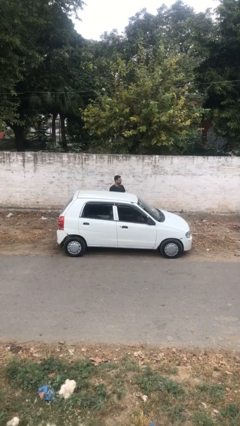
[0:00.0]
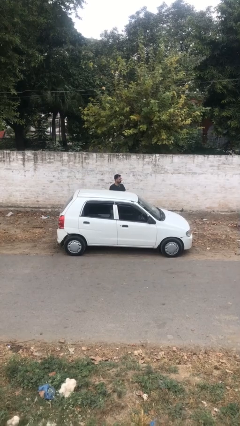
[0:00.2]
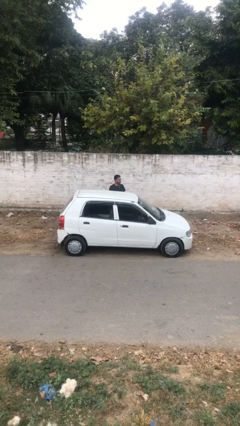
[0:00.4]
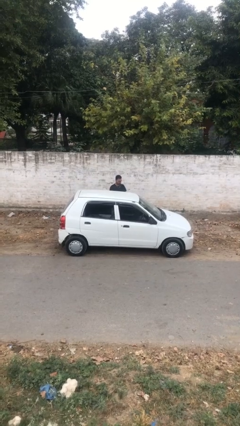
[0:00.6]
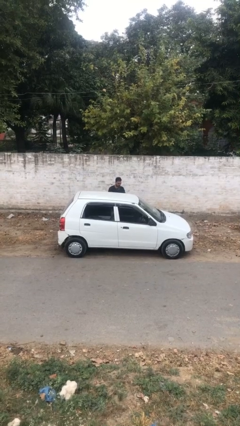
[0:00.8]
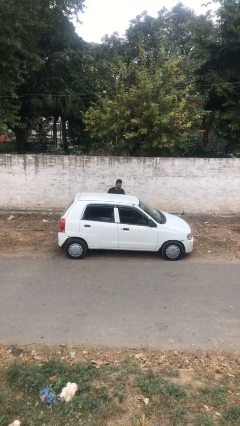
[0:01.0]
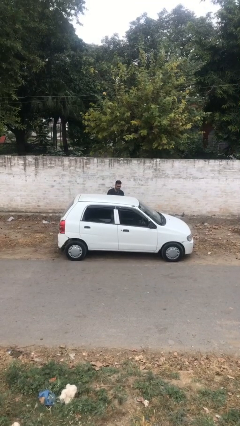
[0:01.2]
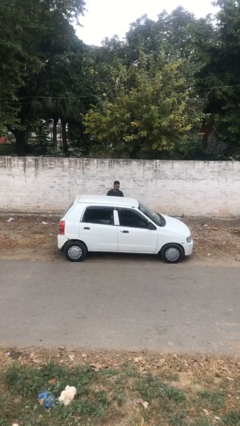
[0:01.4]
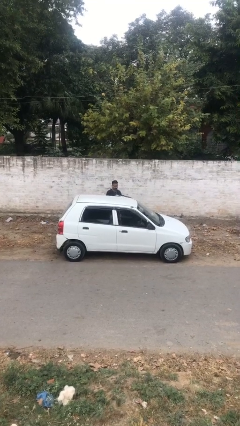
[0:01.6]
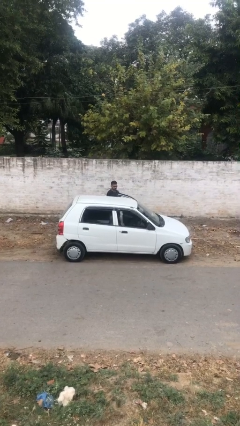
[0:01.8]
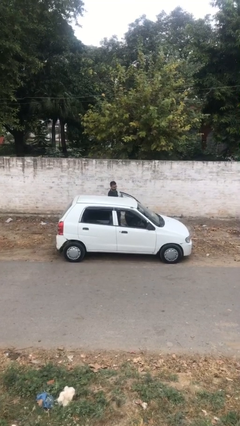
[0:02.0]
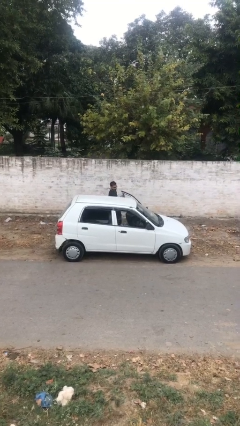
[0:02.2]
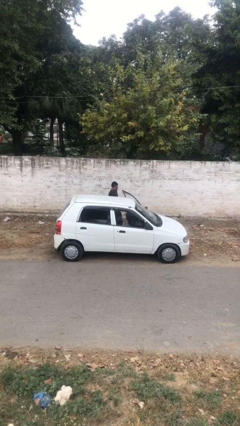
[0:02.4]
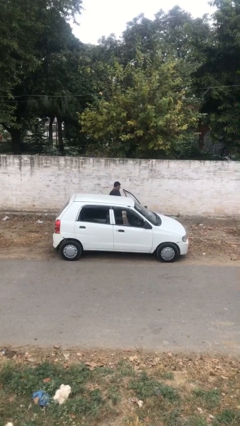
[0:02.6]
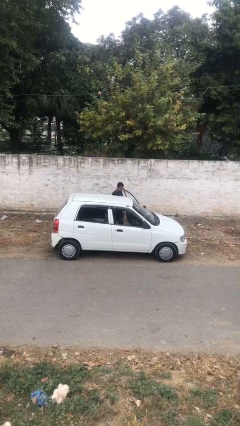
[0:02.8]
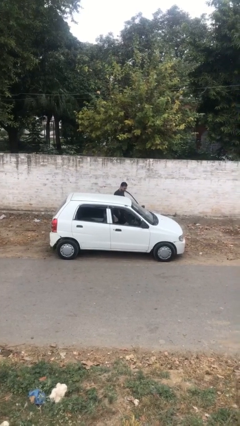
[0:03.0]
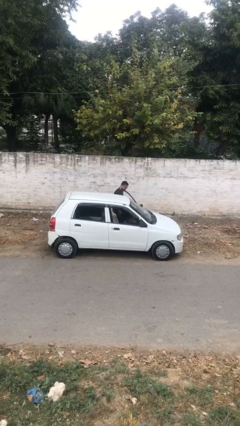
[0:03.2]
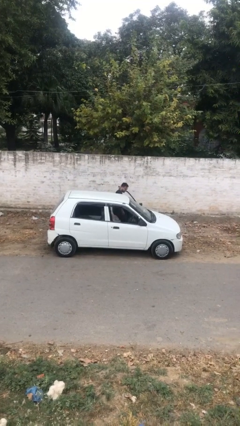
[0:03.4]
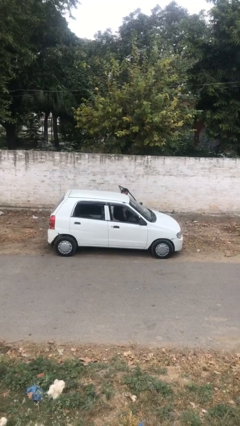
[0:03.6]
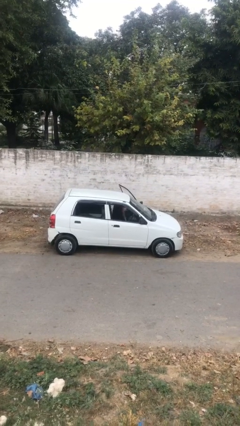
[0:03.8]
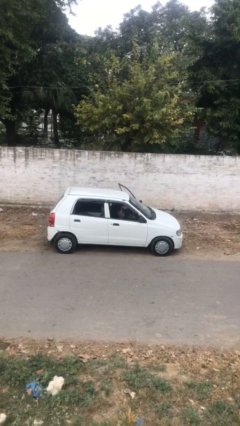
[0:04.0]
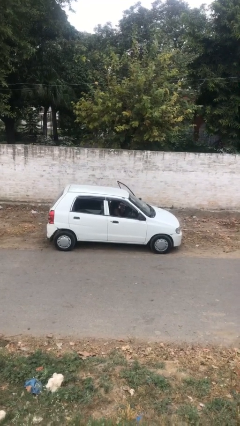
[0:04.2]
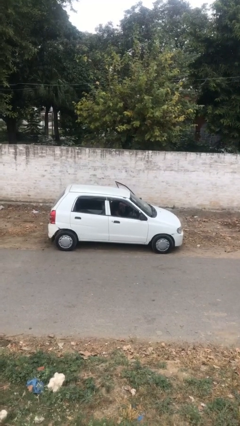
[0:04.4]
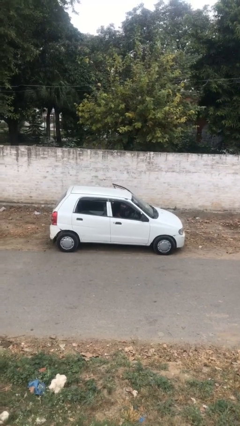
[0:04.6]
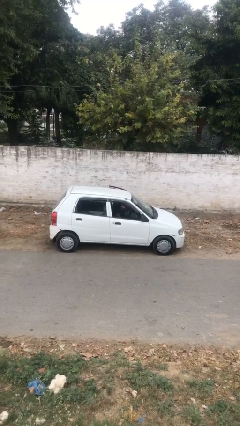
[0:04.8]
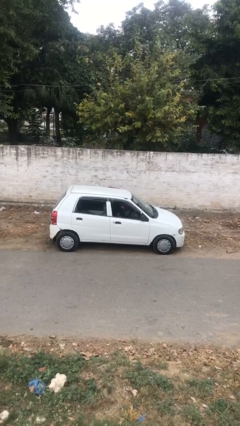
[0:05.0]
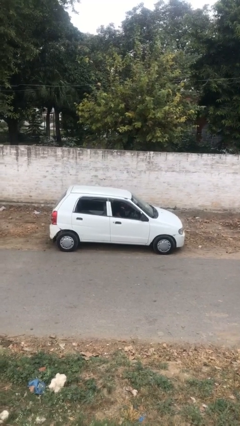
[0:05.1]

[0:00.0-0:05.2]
person enters car

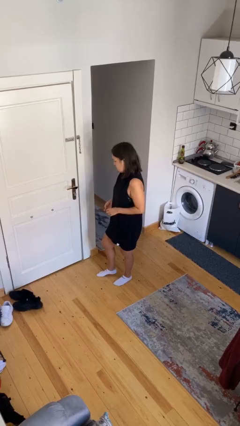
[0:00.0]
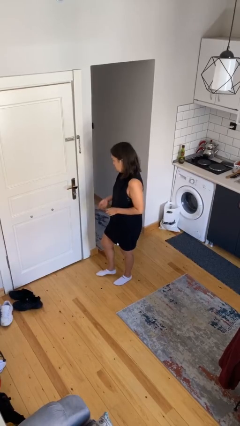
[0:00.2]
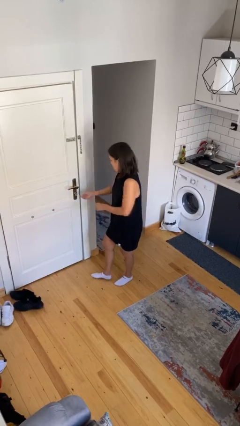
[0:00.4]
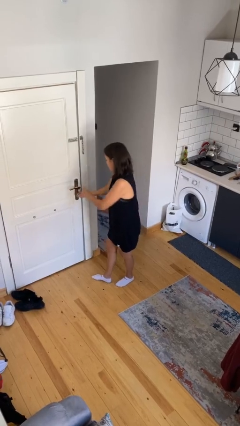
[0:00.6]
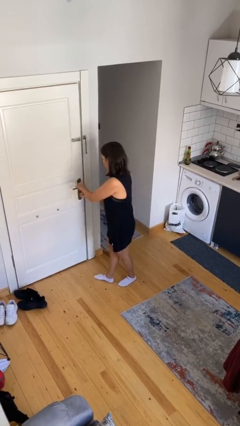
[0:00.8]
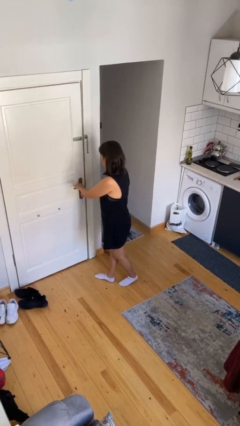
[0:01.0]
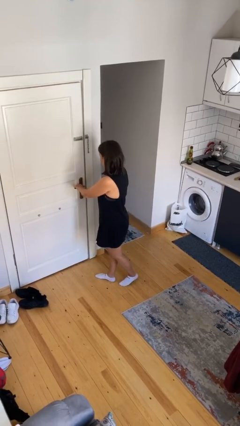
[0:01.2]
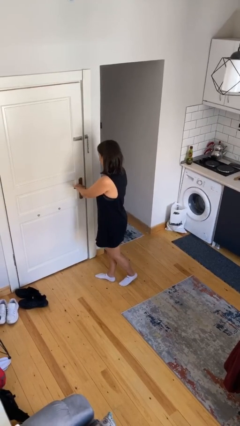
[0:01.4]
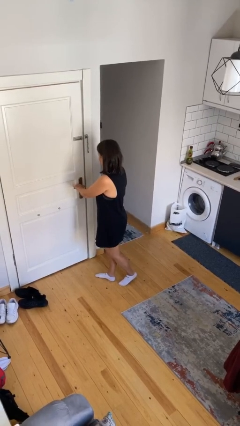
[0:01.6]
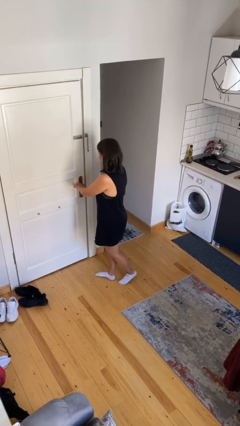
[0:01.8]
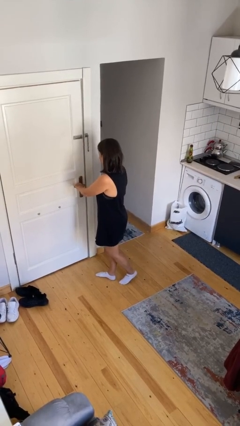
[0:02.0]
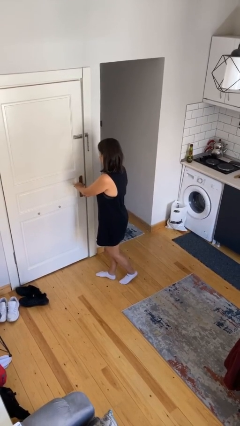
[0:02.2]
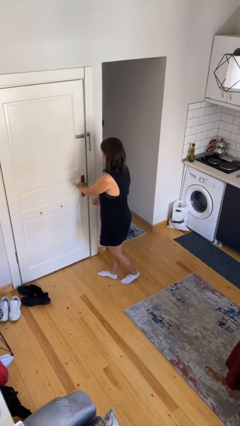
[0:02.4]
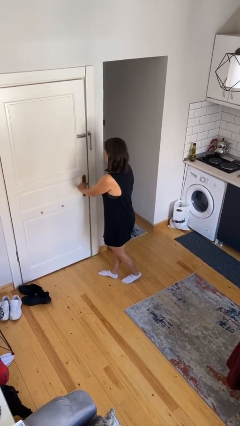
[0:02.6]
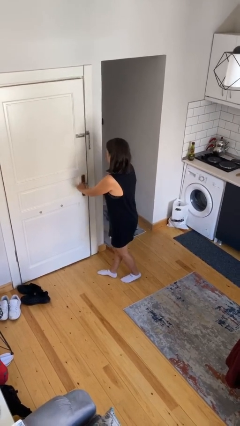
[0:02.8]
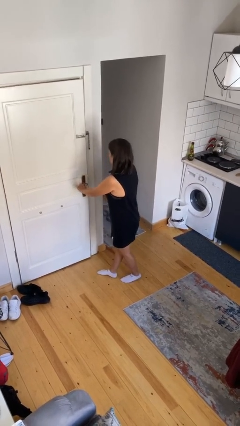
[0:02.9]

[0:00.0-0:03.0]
person unlocks door with keys

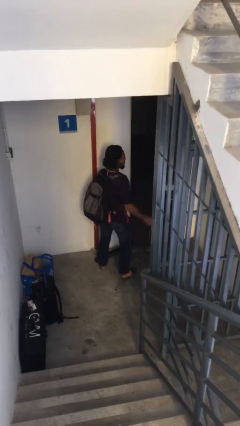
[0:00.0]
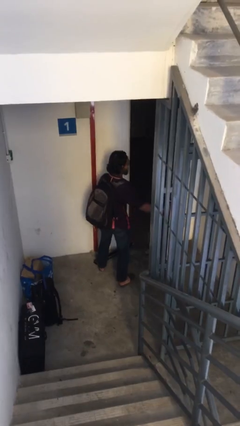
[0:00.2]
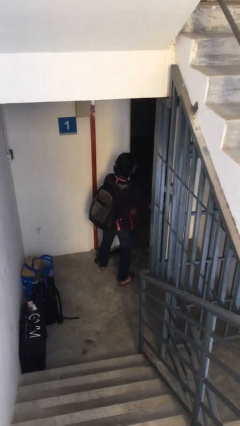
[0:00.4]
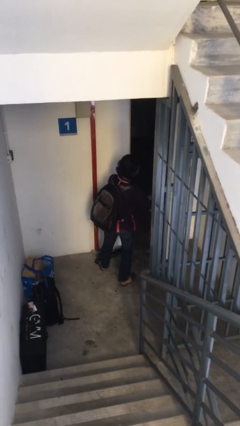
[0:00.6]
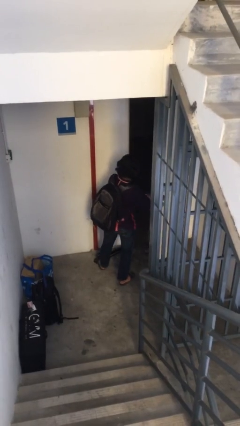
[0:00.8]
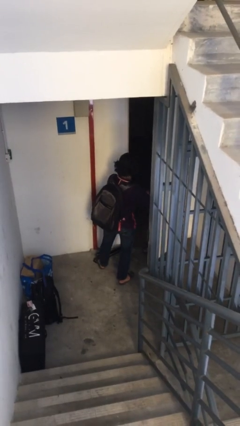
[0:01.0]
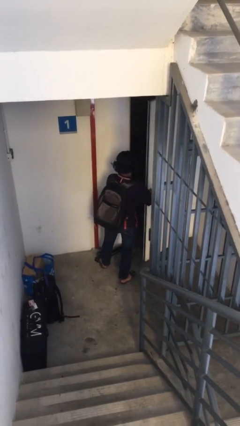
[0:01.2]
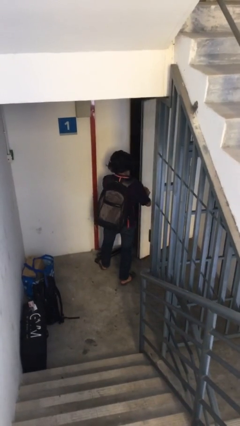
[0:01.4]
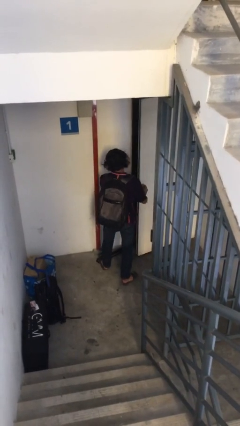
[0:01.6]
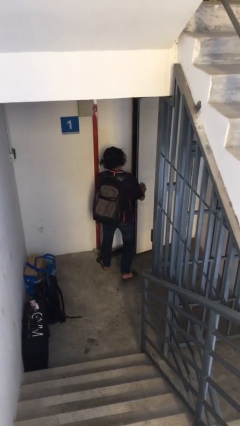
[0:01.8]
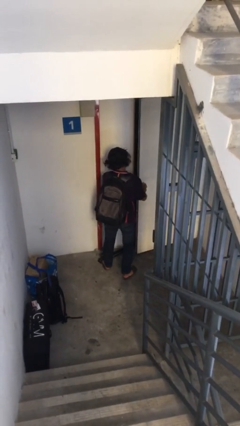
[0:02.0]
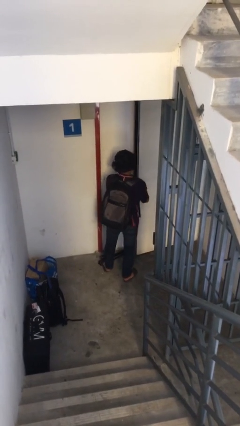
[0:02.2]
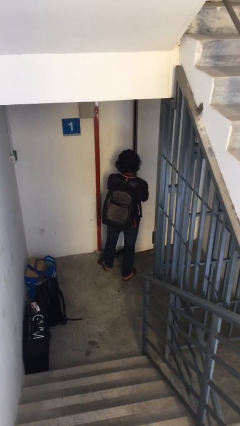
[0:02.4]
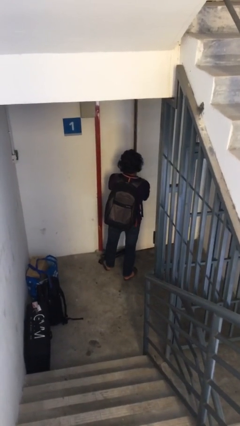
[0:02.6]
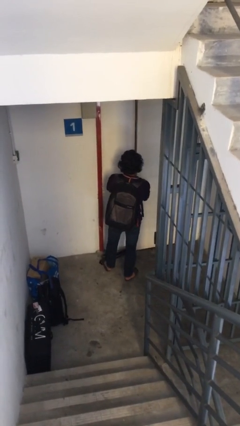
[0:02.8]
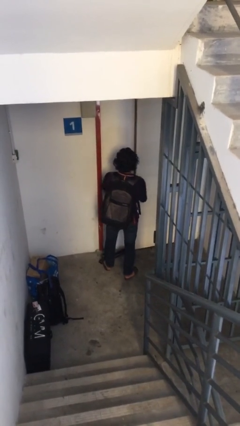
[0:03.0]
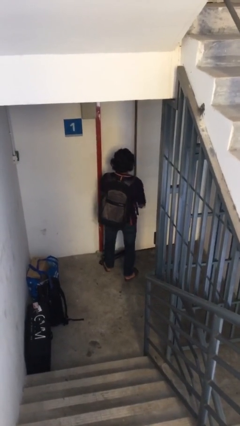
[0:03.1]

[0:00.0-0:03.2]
person closes facility door

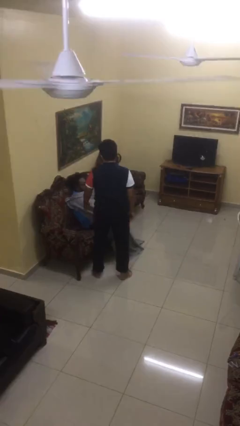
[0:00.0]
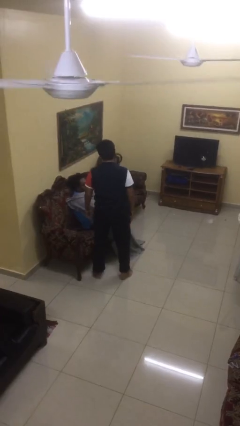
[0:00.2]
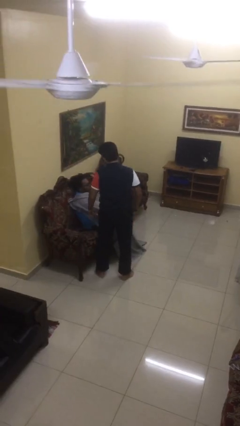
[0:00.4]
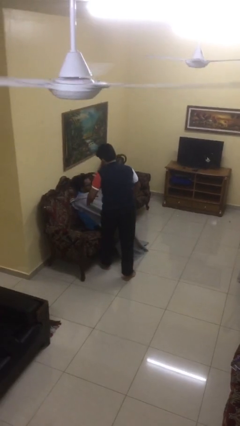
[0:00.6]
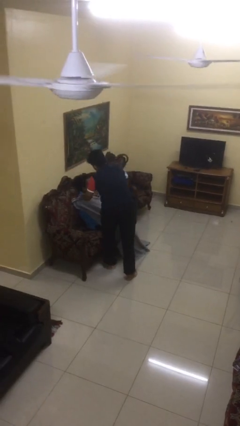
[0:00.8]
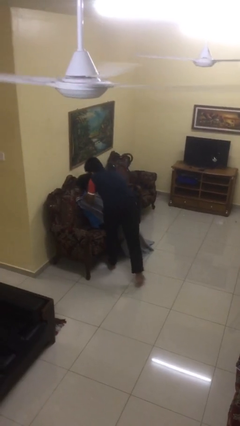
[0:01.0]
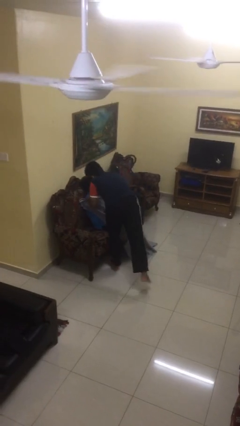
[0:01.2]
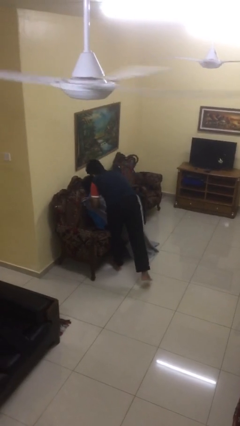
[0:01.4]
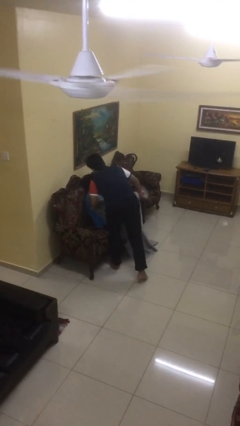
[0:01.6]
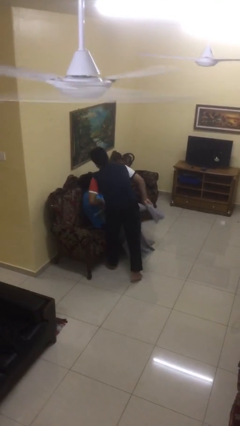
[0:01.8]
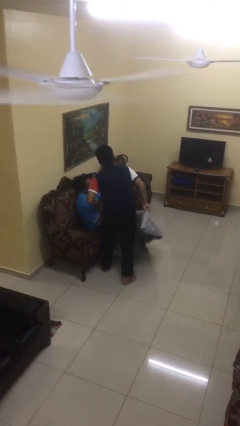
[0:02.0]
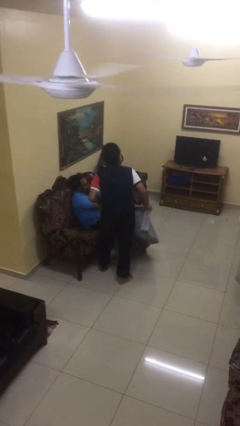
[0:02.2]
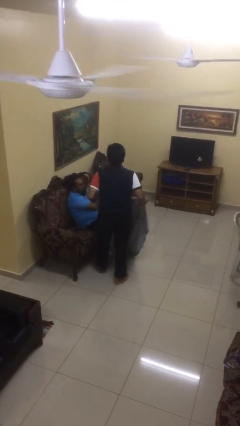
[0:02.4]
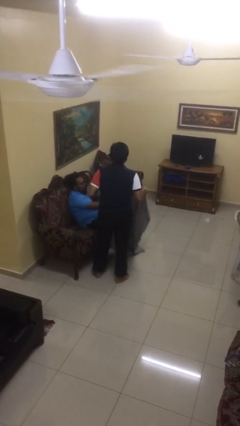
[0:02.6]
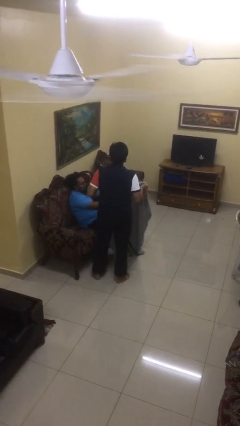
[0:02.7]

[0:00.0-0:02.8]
person uncovers friend with blanket

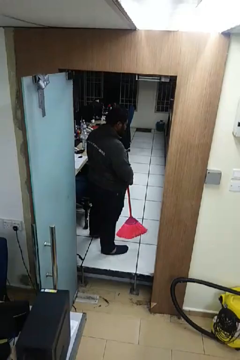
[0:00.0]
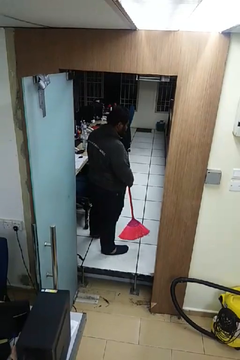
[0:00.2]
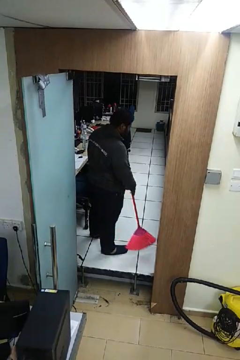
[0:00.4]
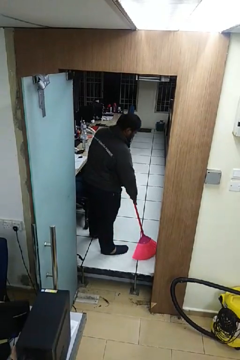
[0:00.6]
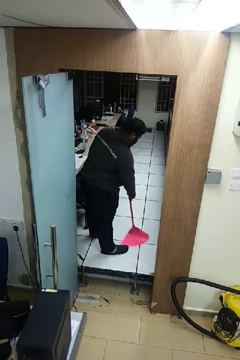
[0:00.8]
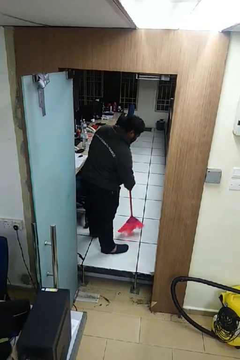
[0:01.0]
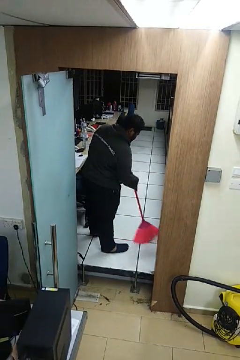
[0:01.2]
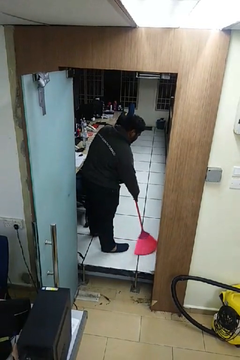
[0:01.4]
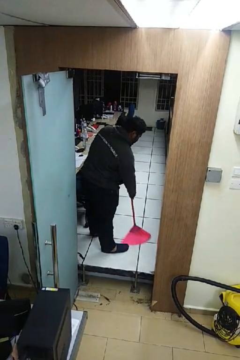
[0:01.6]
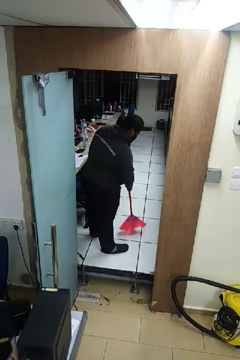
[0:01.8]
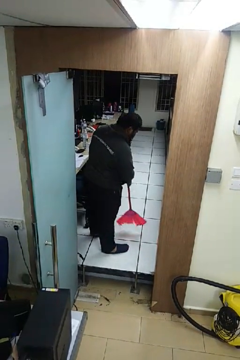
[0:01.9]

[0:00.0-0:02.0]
person sweeps floor

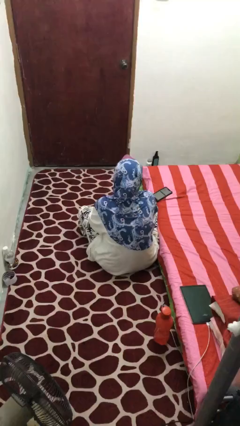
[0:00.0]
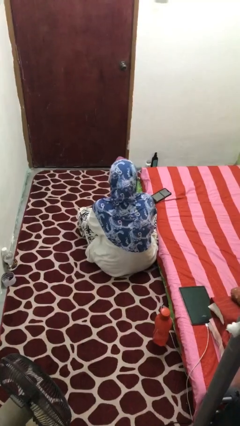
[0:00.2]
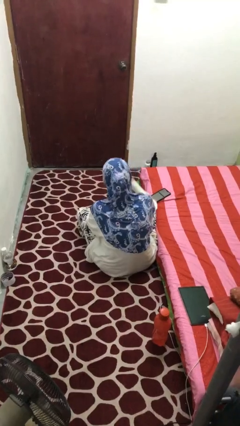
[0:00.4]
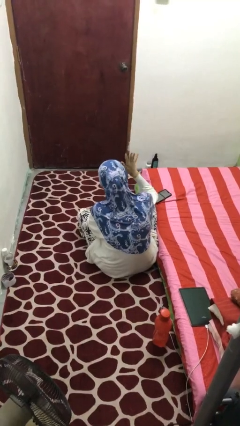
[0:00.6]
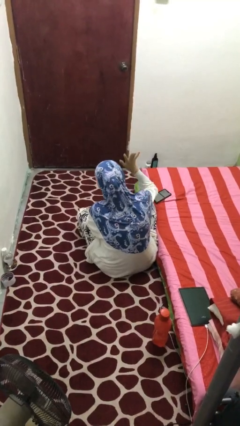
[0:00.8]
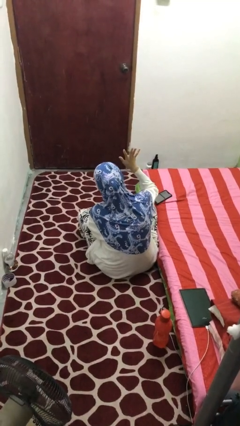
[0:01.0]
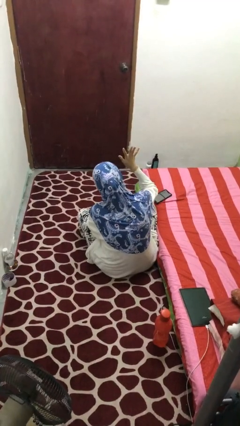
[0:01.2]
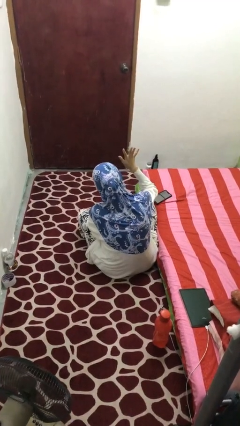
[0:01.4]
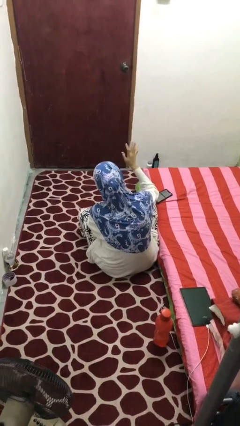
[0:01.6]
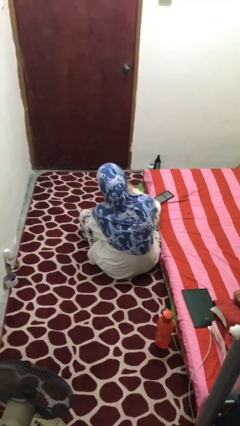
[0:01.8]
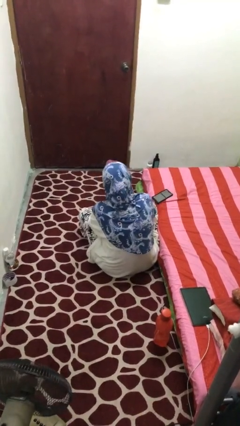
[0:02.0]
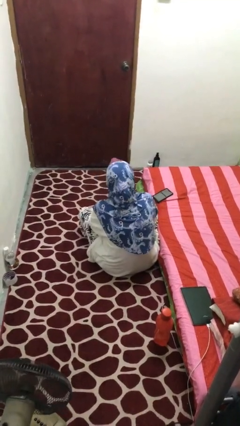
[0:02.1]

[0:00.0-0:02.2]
person gestures number five
